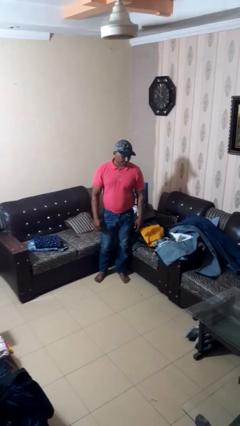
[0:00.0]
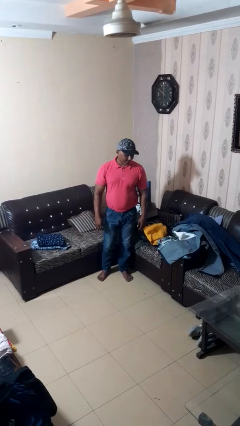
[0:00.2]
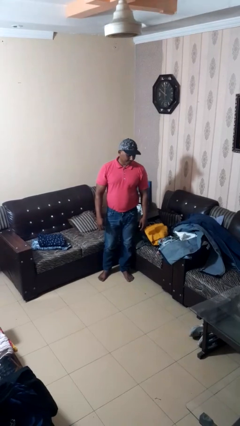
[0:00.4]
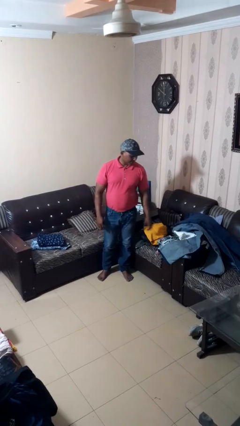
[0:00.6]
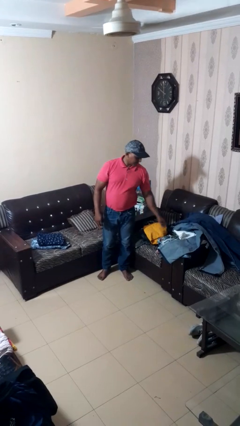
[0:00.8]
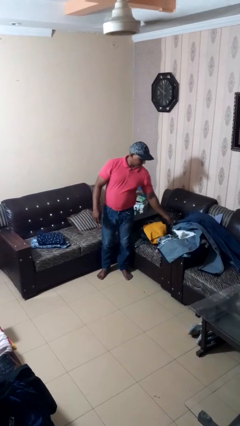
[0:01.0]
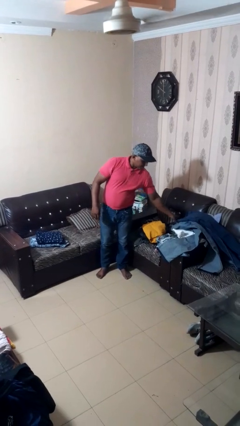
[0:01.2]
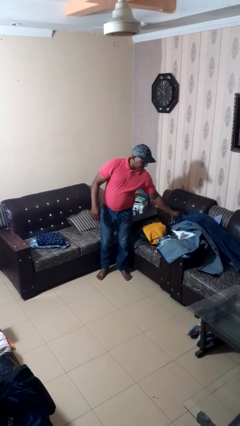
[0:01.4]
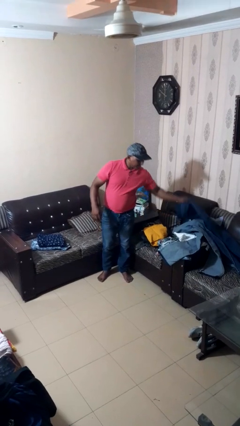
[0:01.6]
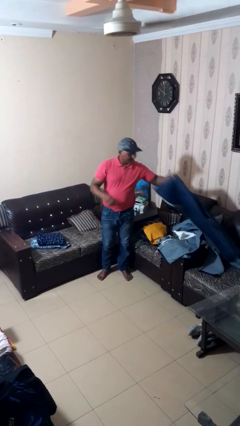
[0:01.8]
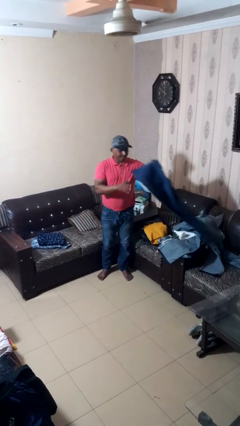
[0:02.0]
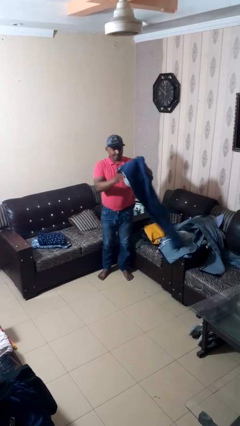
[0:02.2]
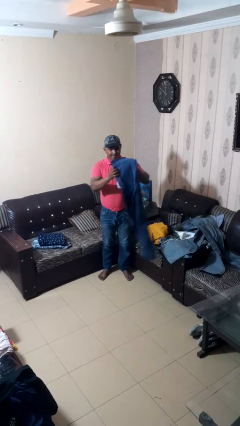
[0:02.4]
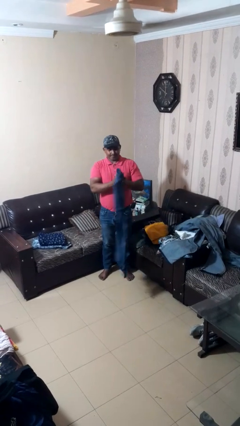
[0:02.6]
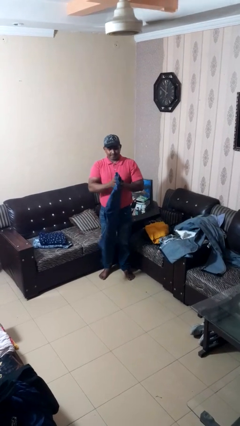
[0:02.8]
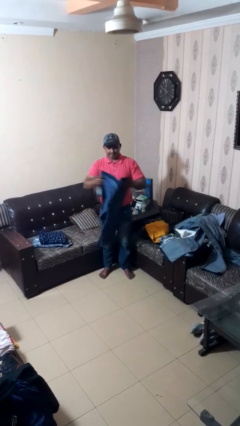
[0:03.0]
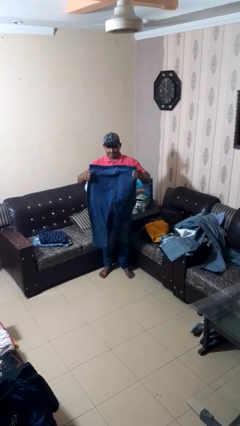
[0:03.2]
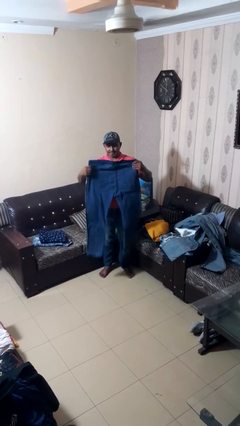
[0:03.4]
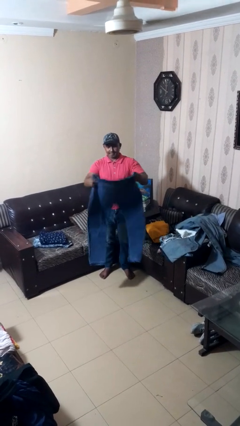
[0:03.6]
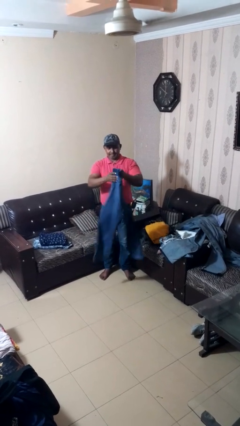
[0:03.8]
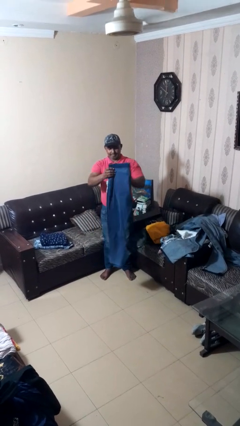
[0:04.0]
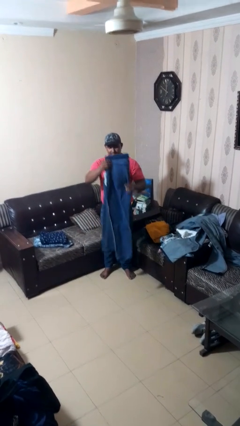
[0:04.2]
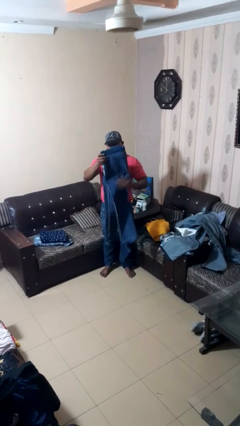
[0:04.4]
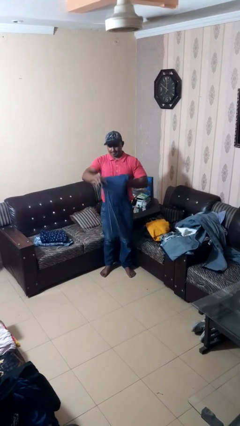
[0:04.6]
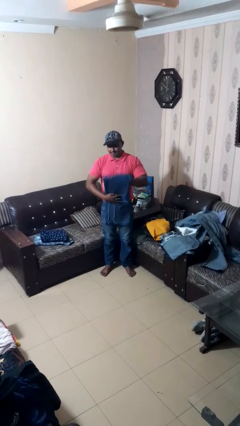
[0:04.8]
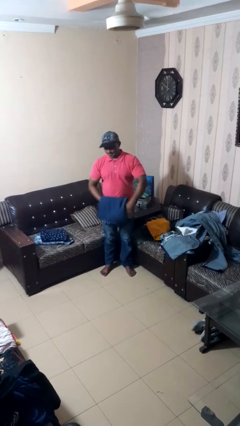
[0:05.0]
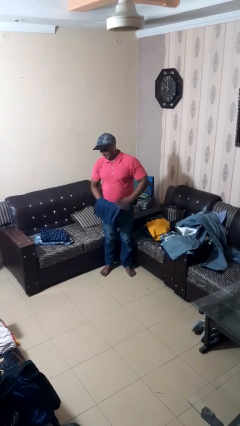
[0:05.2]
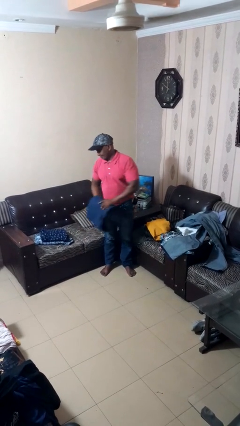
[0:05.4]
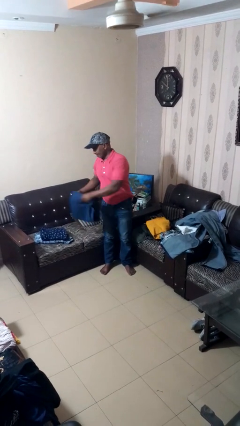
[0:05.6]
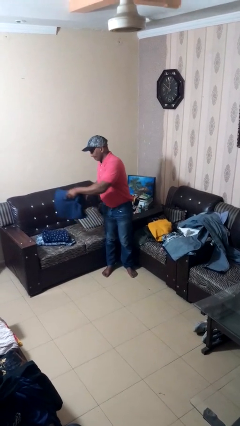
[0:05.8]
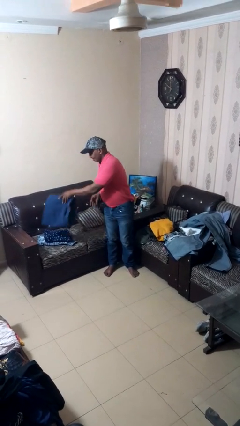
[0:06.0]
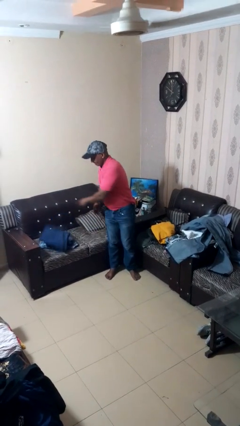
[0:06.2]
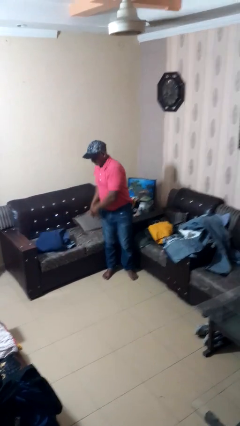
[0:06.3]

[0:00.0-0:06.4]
person folds pants

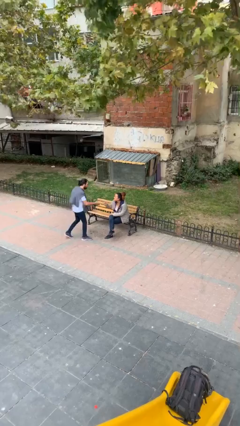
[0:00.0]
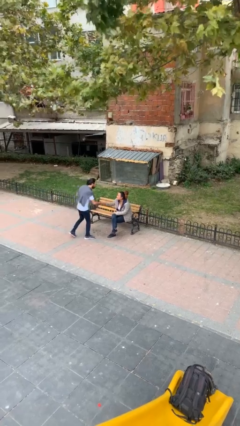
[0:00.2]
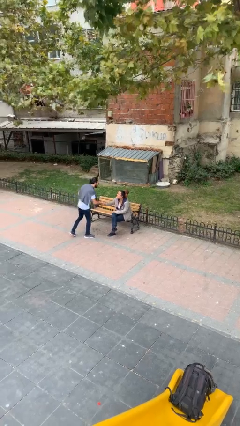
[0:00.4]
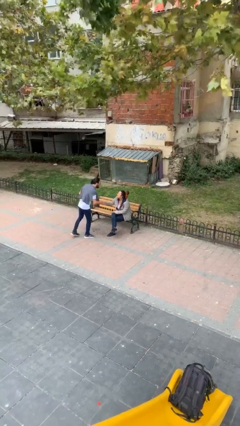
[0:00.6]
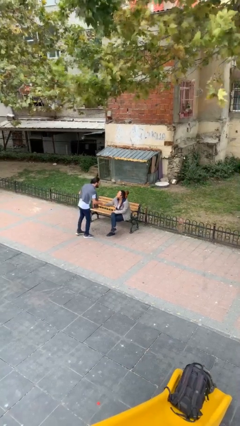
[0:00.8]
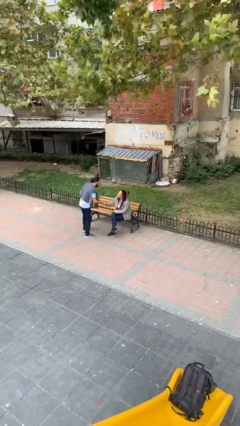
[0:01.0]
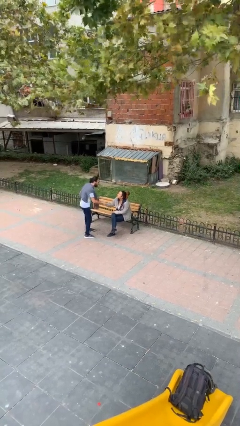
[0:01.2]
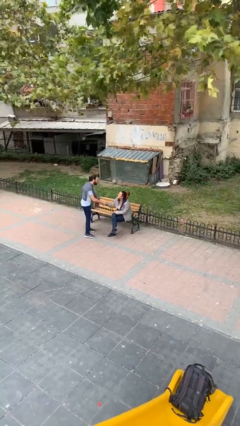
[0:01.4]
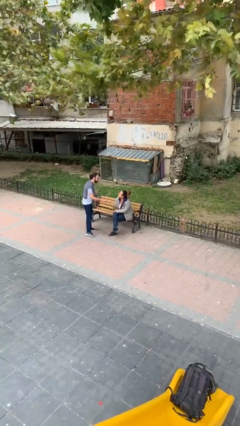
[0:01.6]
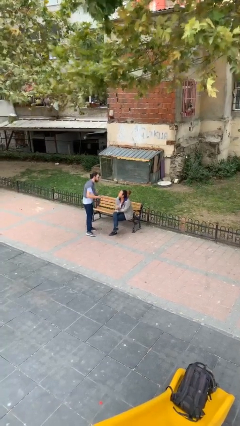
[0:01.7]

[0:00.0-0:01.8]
person shakes hand

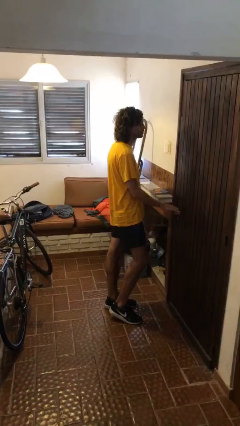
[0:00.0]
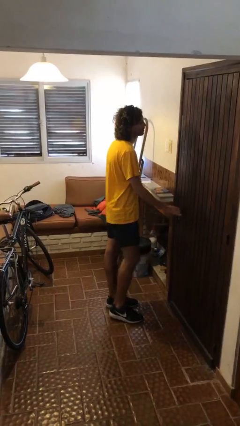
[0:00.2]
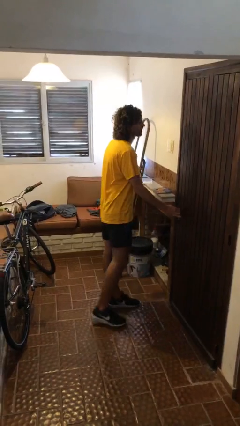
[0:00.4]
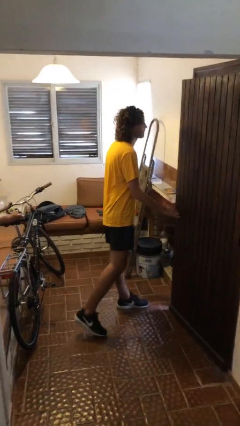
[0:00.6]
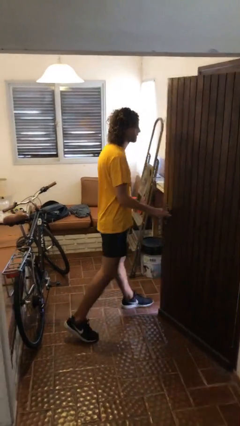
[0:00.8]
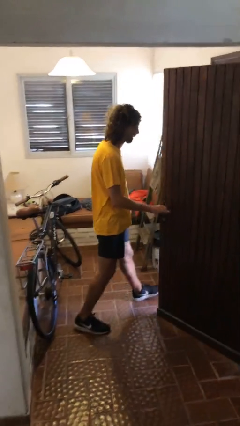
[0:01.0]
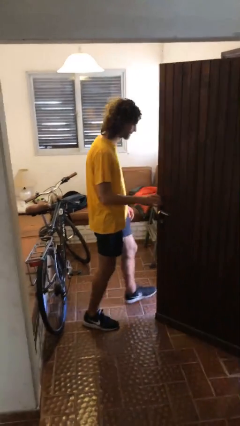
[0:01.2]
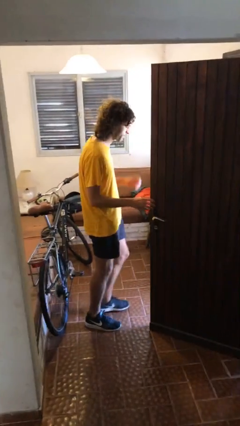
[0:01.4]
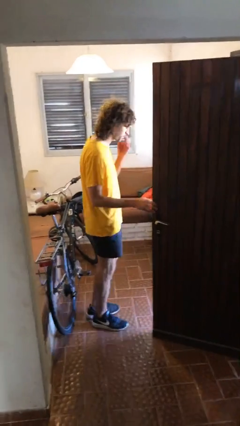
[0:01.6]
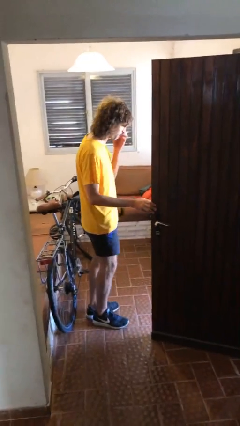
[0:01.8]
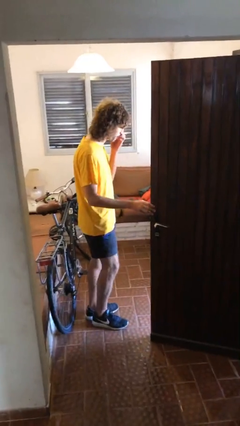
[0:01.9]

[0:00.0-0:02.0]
person opens facility door

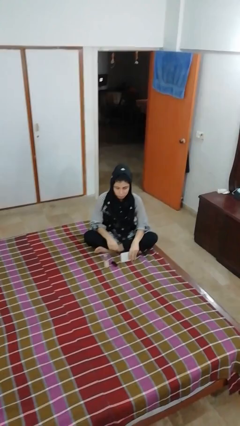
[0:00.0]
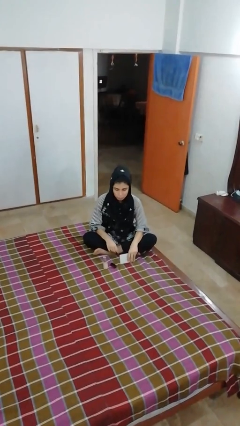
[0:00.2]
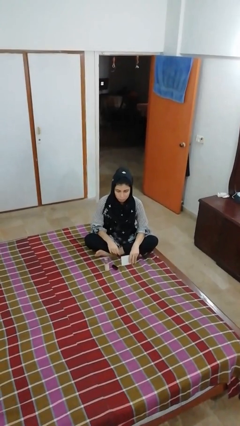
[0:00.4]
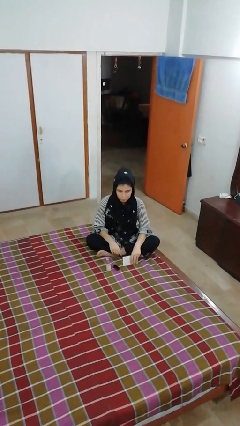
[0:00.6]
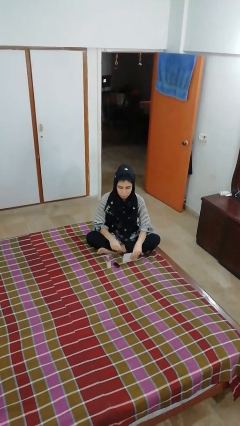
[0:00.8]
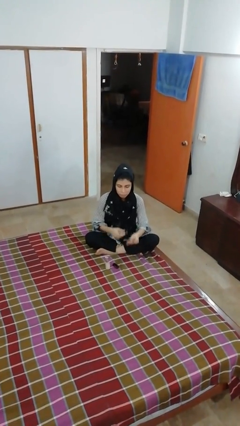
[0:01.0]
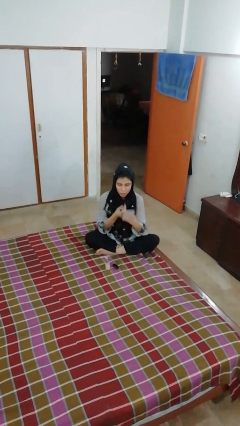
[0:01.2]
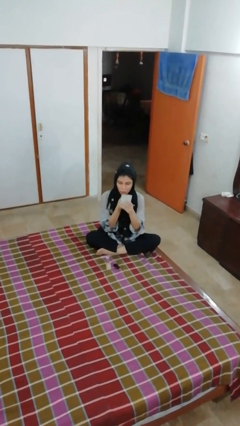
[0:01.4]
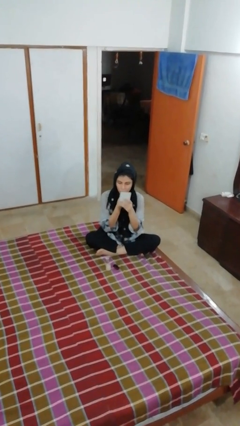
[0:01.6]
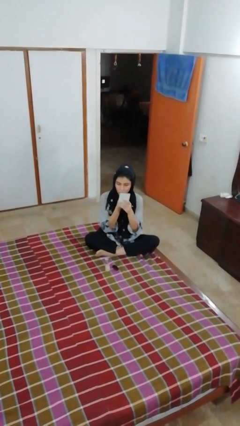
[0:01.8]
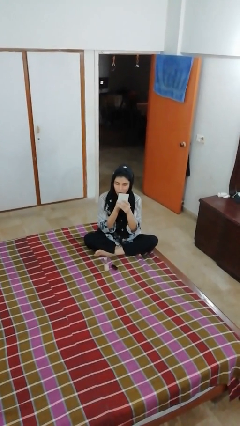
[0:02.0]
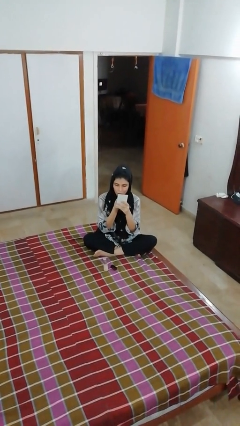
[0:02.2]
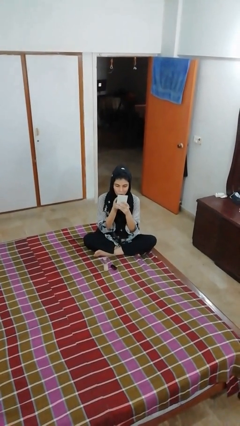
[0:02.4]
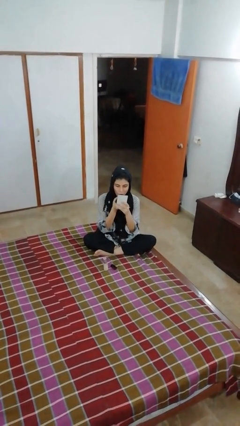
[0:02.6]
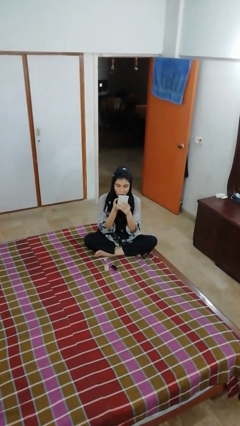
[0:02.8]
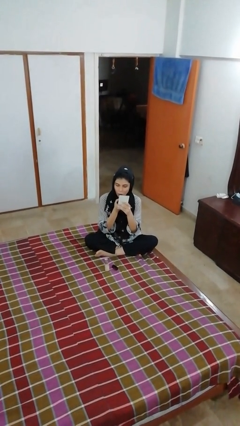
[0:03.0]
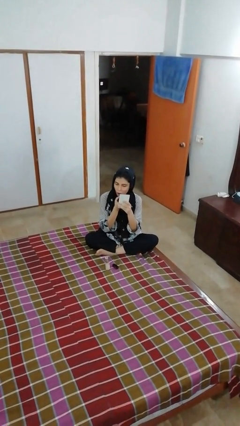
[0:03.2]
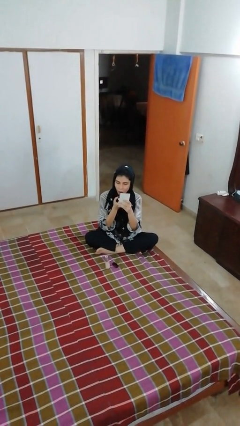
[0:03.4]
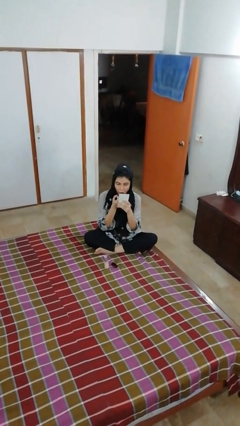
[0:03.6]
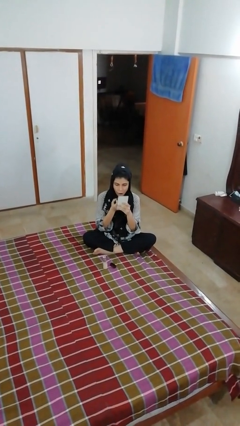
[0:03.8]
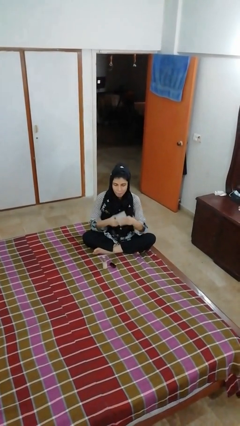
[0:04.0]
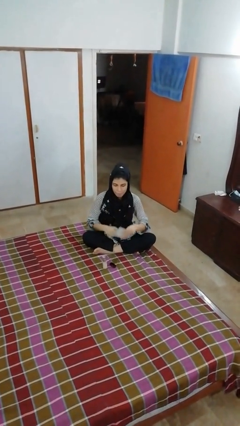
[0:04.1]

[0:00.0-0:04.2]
person applies lip makeup

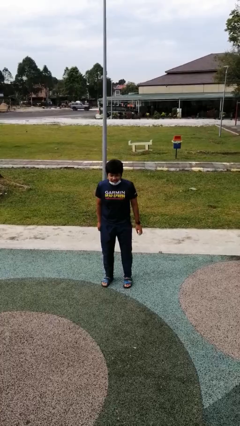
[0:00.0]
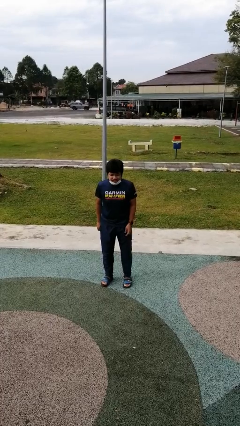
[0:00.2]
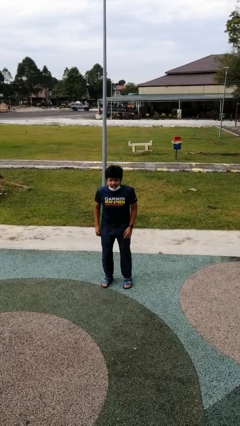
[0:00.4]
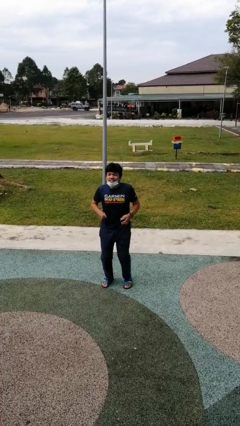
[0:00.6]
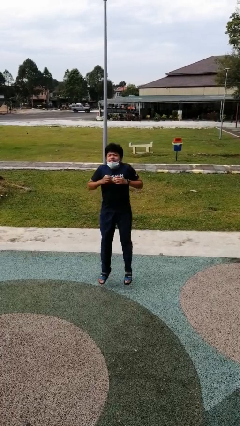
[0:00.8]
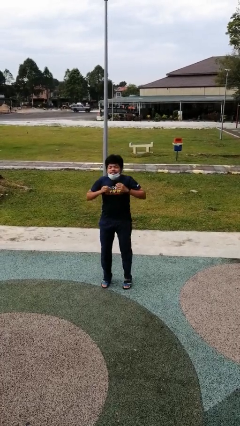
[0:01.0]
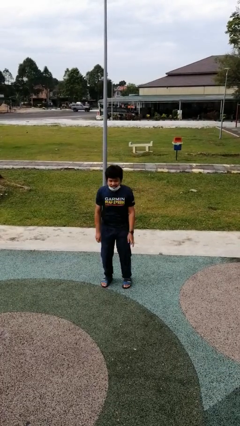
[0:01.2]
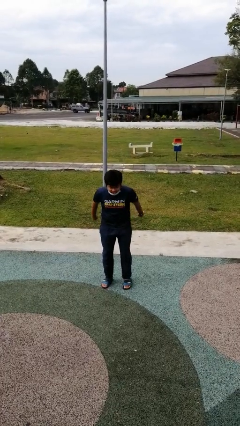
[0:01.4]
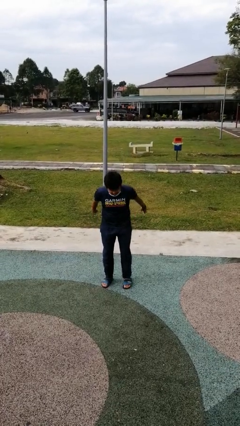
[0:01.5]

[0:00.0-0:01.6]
person jumps

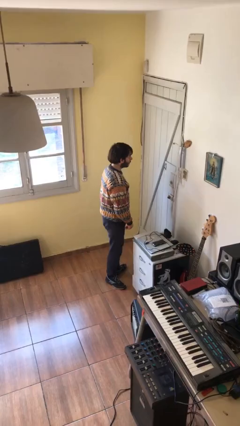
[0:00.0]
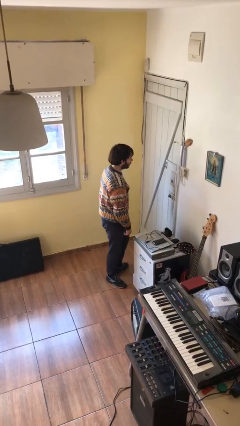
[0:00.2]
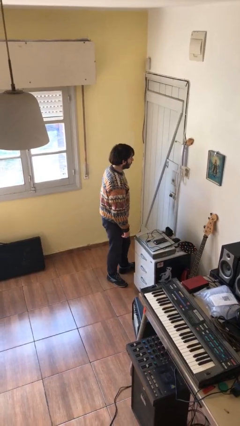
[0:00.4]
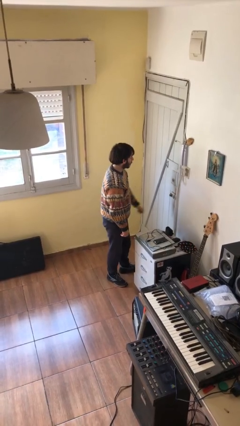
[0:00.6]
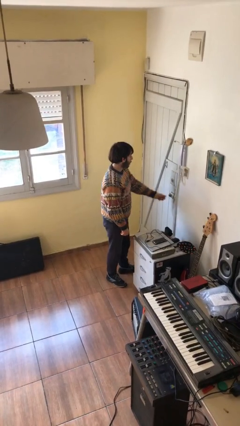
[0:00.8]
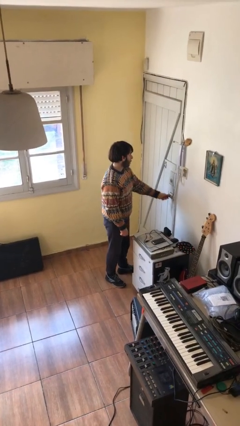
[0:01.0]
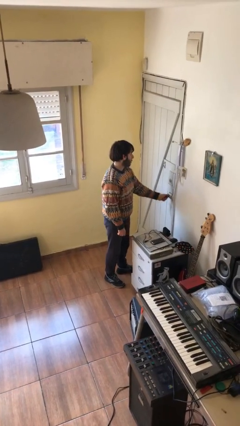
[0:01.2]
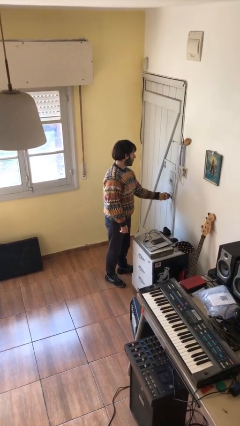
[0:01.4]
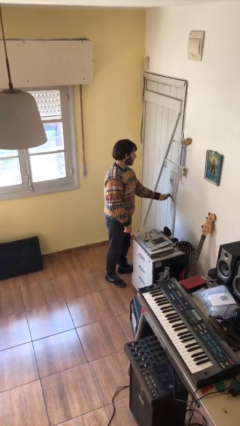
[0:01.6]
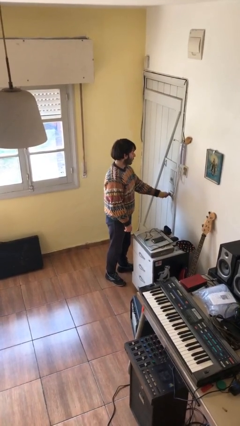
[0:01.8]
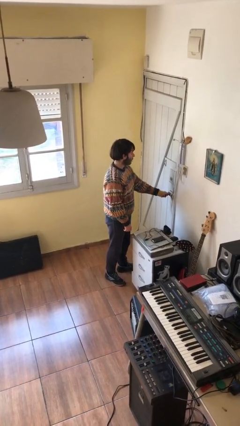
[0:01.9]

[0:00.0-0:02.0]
person unlocks door with keys
